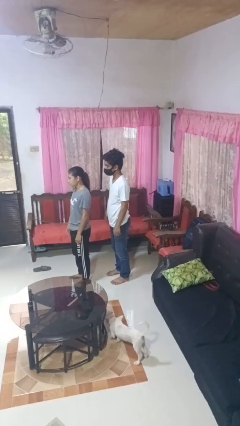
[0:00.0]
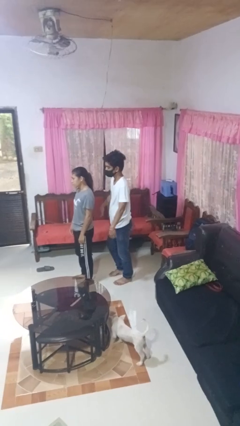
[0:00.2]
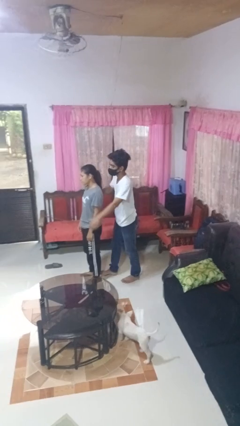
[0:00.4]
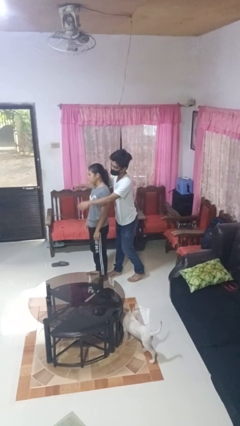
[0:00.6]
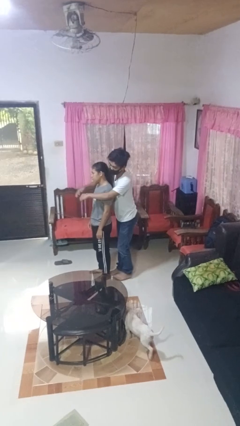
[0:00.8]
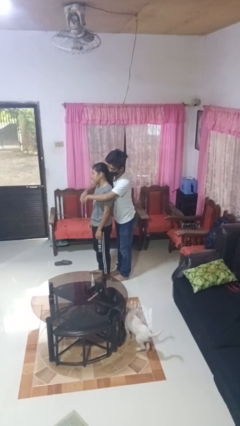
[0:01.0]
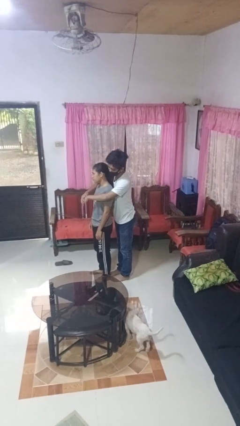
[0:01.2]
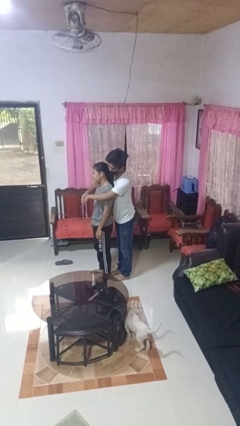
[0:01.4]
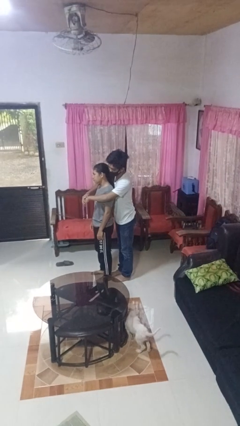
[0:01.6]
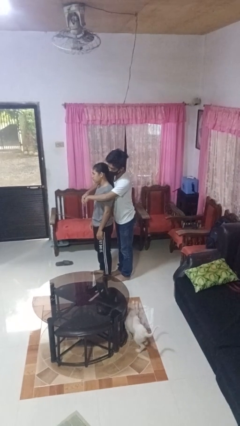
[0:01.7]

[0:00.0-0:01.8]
person hugs person from behind

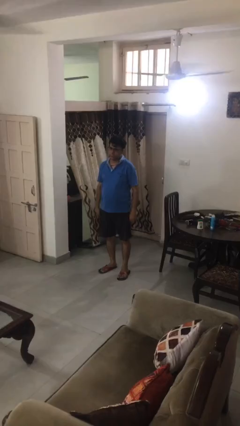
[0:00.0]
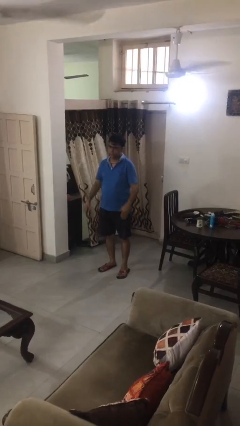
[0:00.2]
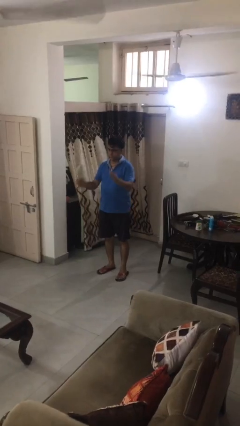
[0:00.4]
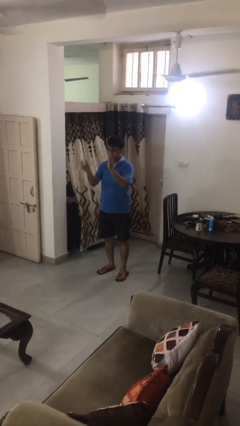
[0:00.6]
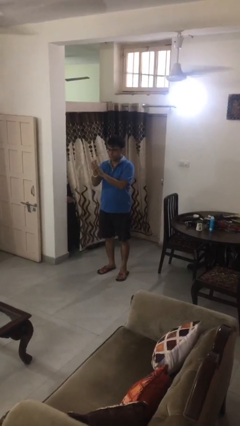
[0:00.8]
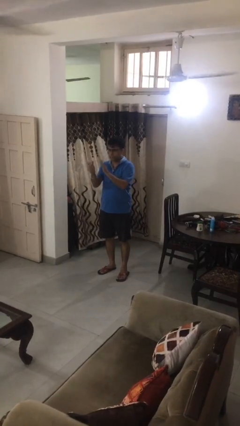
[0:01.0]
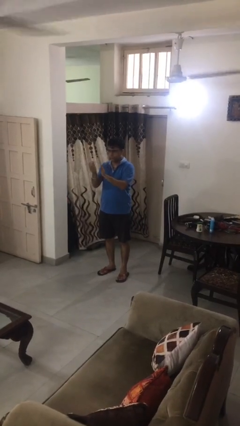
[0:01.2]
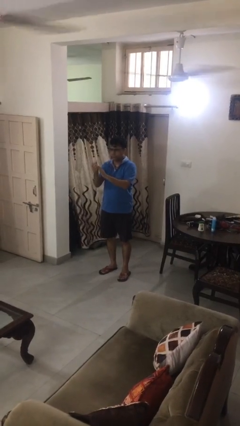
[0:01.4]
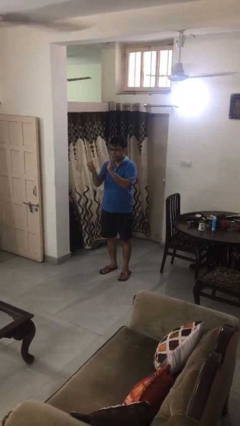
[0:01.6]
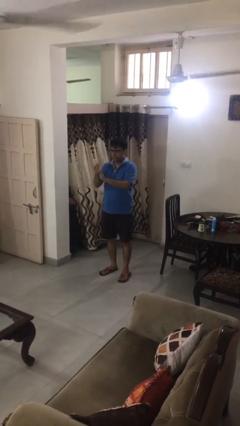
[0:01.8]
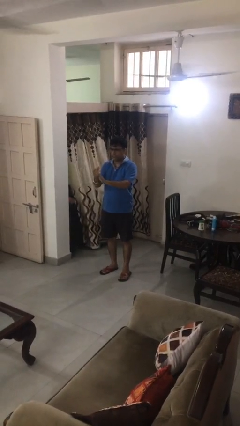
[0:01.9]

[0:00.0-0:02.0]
person claps hands

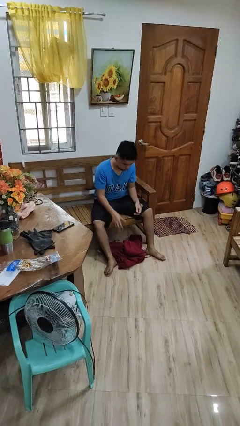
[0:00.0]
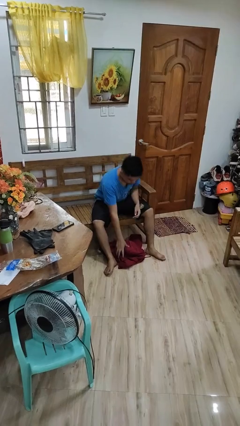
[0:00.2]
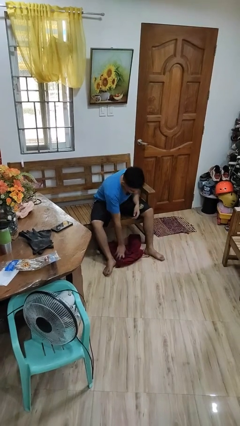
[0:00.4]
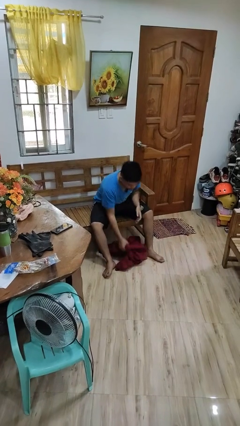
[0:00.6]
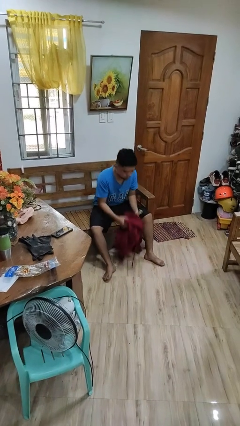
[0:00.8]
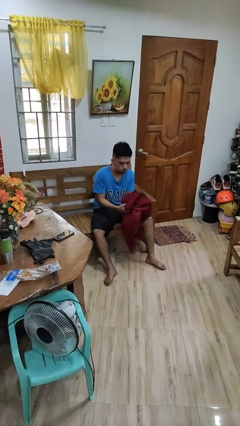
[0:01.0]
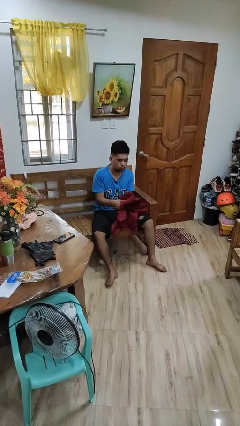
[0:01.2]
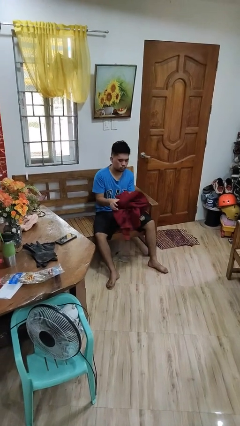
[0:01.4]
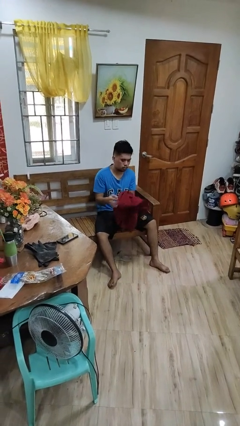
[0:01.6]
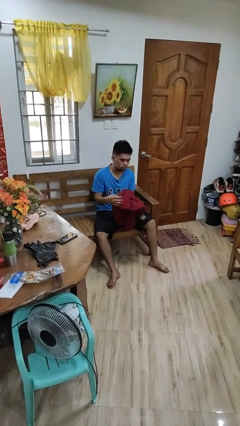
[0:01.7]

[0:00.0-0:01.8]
person picks up object from floor

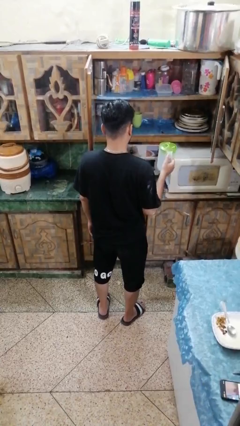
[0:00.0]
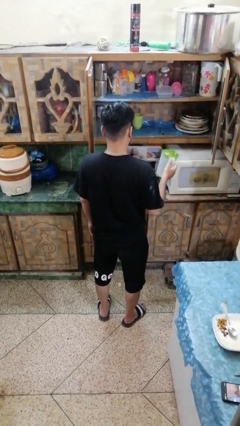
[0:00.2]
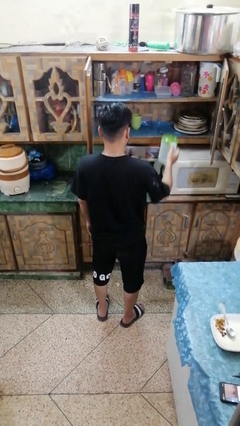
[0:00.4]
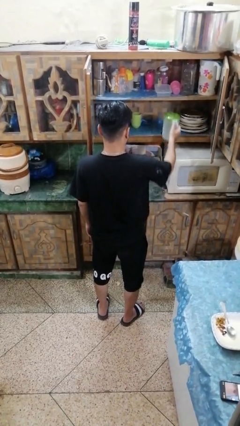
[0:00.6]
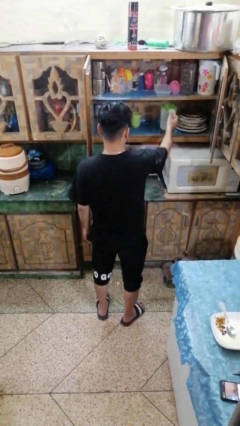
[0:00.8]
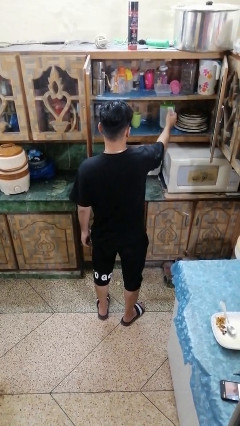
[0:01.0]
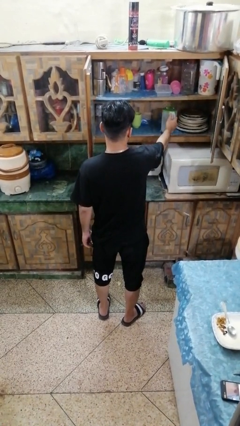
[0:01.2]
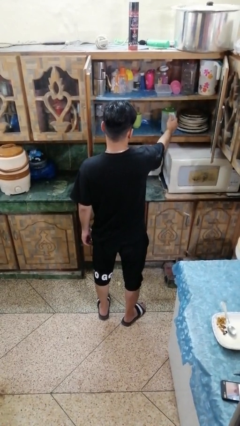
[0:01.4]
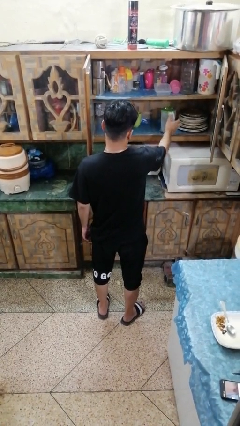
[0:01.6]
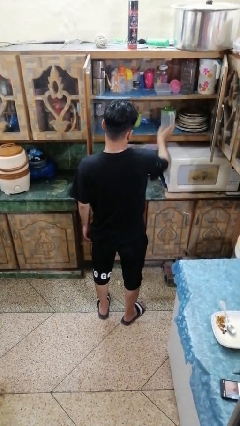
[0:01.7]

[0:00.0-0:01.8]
person puts down object into cabinet

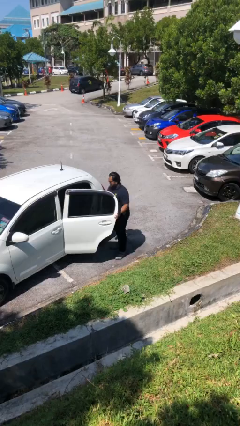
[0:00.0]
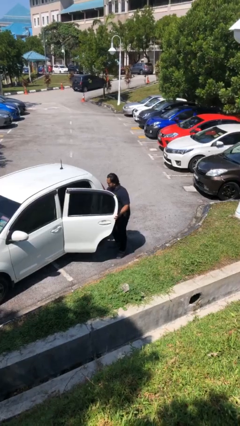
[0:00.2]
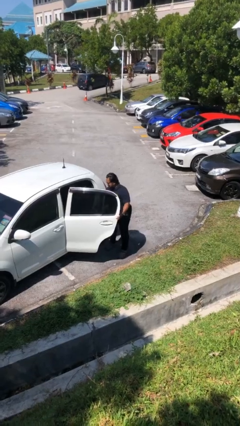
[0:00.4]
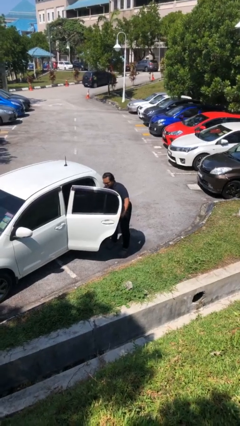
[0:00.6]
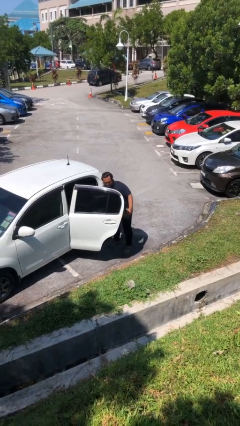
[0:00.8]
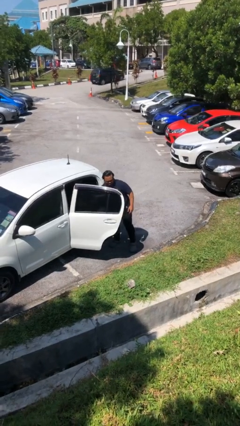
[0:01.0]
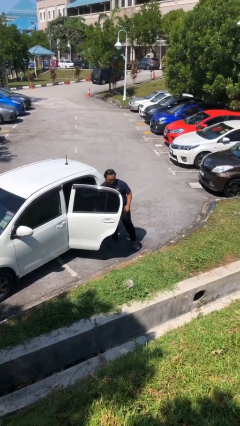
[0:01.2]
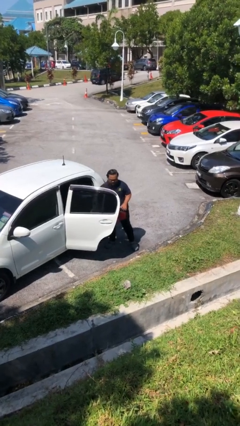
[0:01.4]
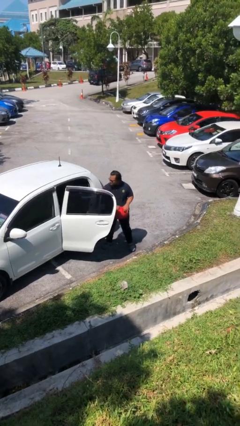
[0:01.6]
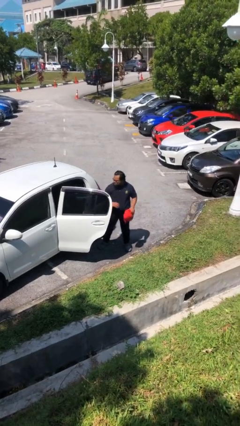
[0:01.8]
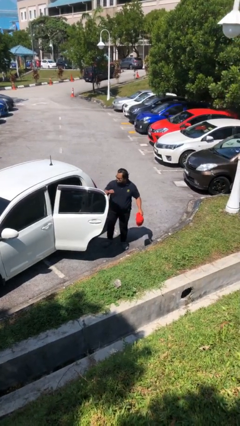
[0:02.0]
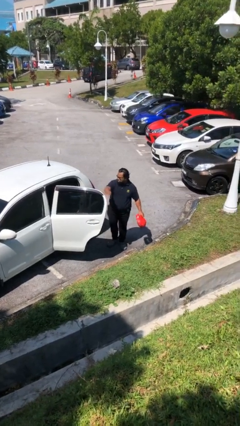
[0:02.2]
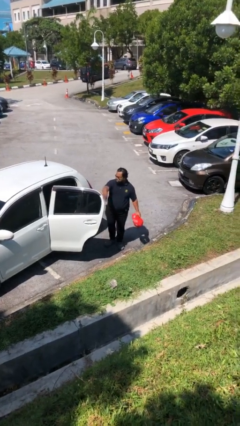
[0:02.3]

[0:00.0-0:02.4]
person unloads car

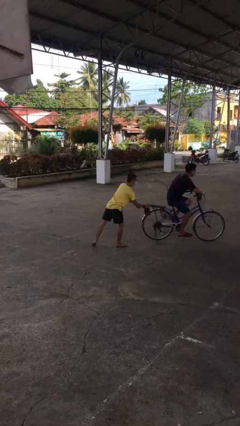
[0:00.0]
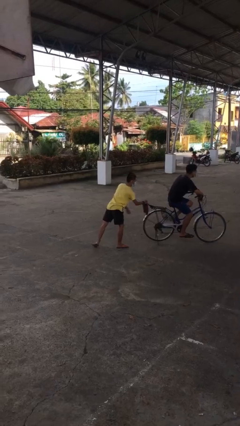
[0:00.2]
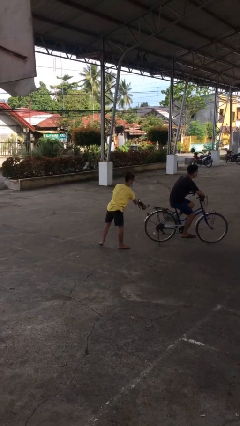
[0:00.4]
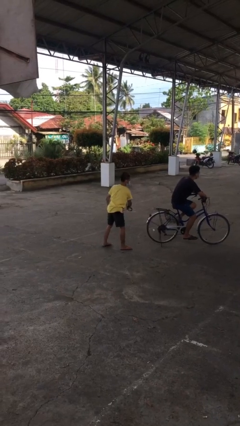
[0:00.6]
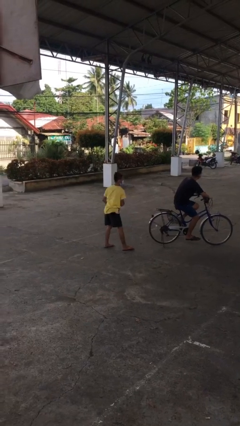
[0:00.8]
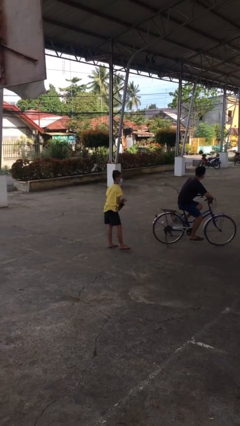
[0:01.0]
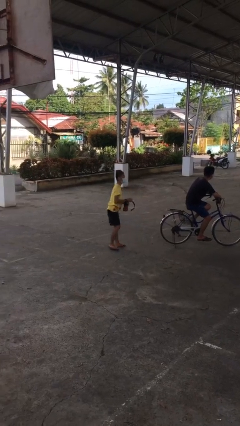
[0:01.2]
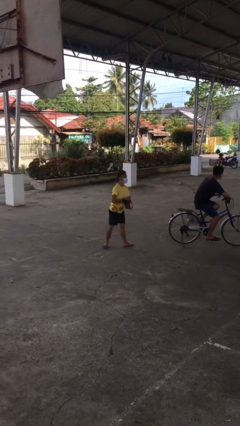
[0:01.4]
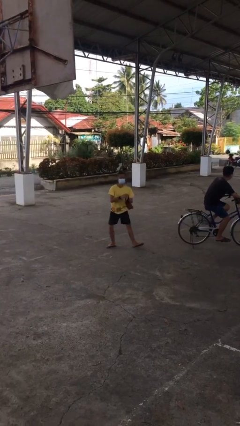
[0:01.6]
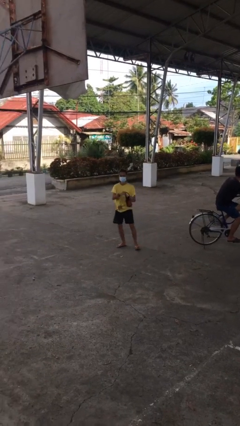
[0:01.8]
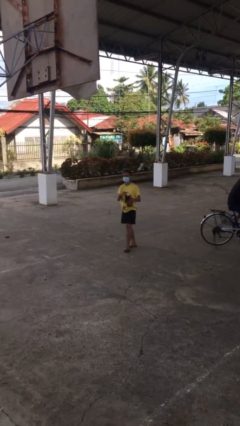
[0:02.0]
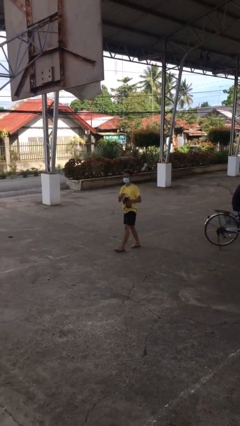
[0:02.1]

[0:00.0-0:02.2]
person steals object from person

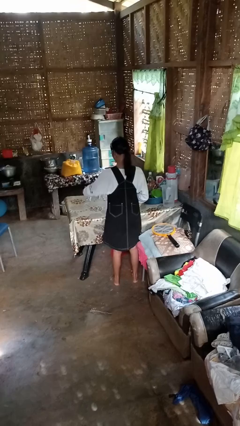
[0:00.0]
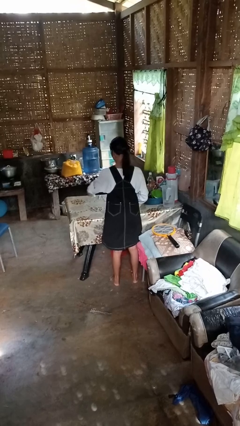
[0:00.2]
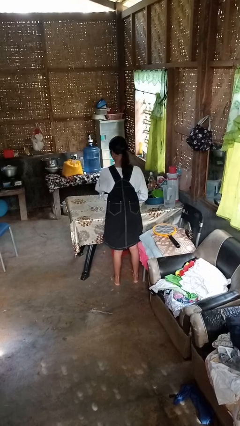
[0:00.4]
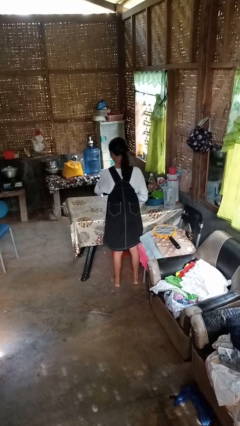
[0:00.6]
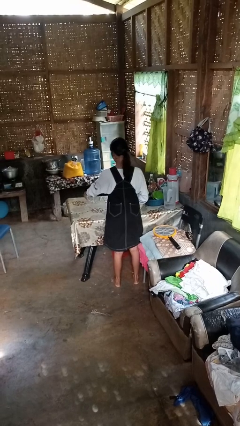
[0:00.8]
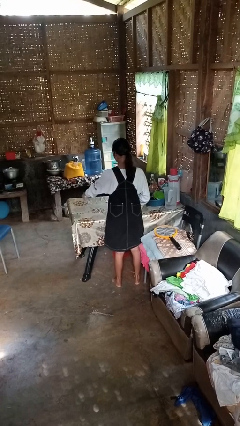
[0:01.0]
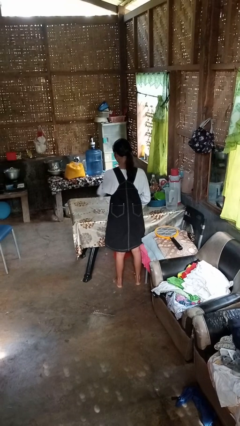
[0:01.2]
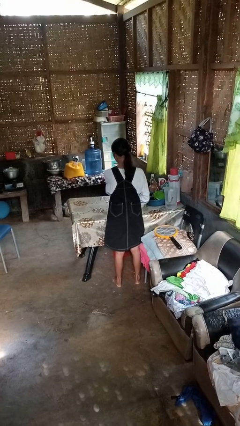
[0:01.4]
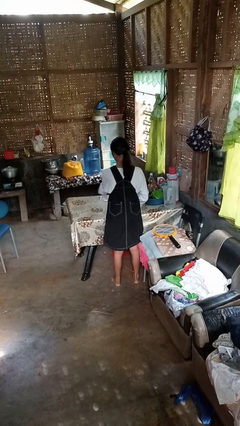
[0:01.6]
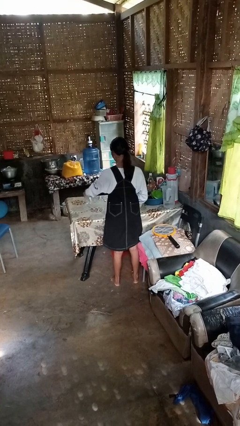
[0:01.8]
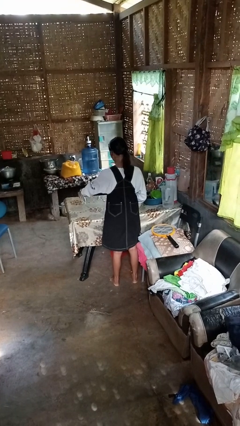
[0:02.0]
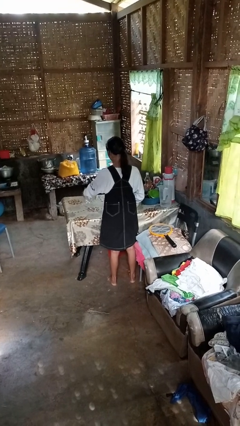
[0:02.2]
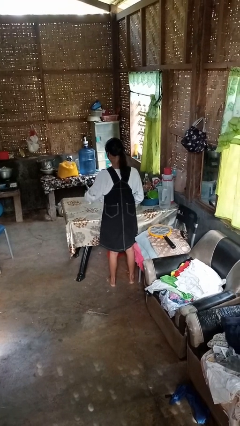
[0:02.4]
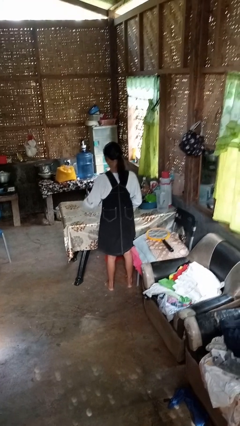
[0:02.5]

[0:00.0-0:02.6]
person sprays from bottle

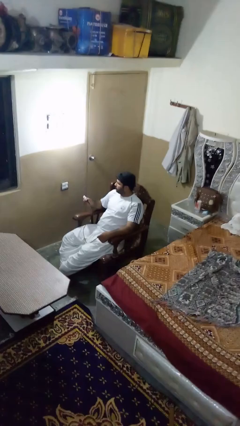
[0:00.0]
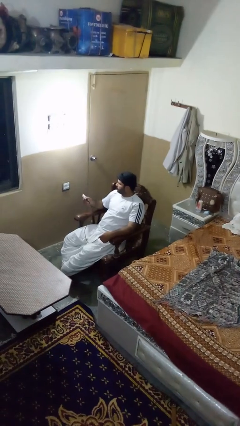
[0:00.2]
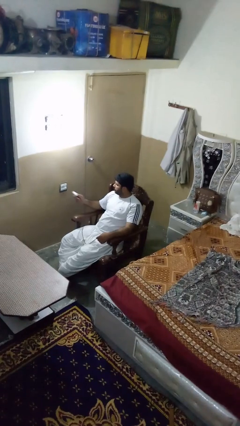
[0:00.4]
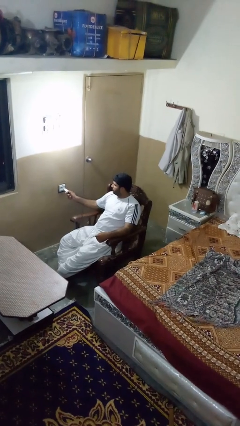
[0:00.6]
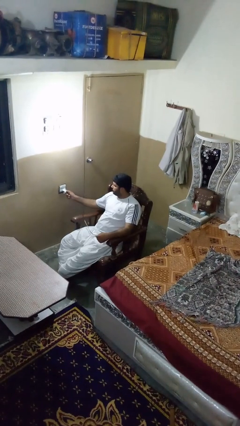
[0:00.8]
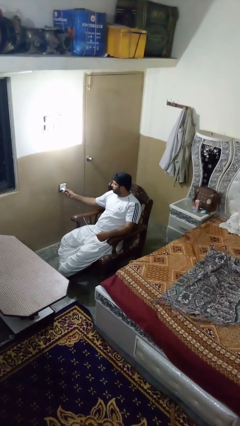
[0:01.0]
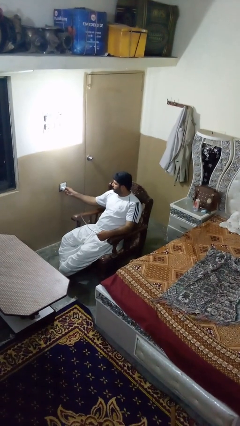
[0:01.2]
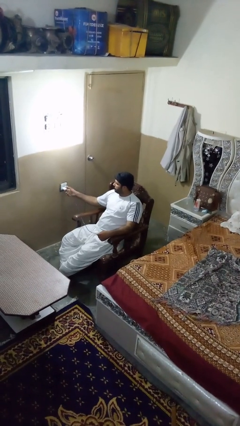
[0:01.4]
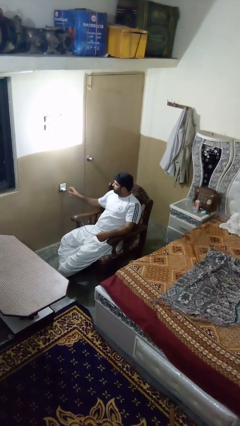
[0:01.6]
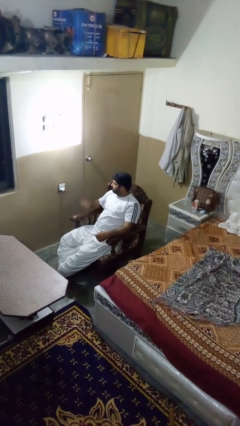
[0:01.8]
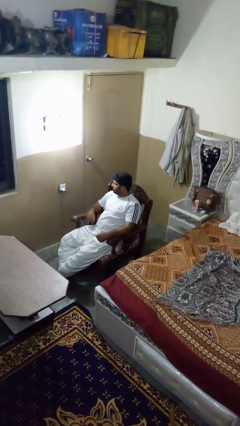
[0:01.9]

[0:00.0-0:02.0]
person plugs into electrical socket

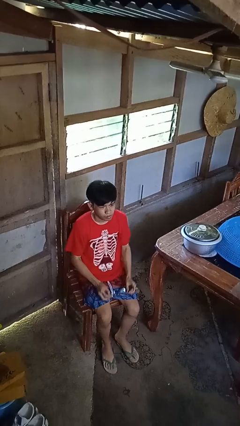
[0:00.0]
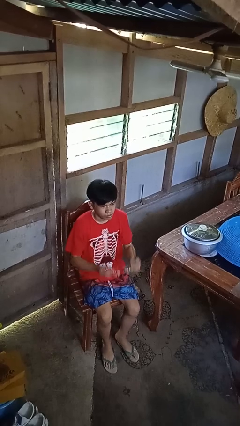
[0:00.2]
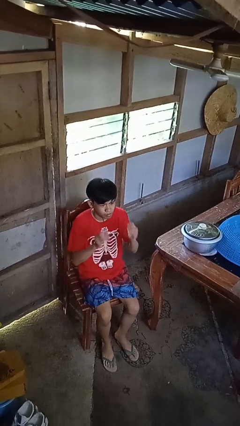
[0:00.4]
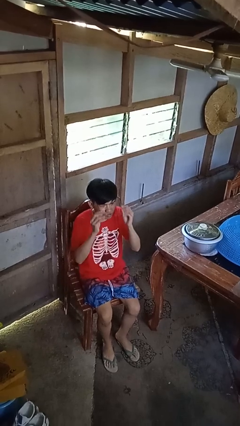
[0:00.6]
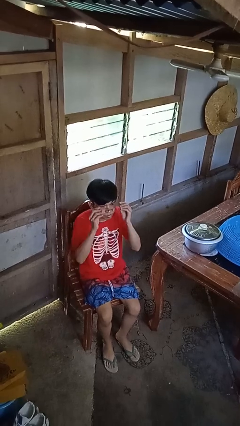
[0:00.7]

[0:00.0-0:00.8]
person puts on glasses
